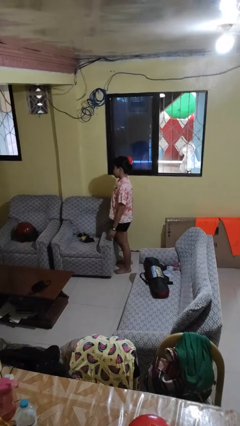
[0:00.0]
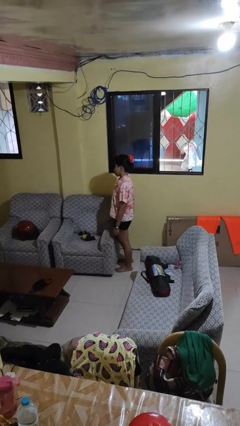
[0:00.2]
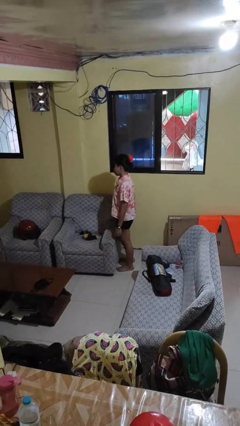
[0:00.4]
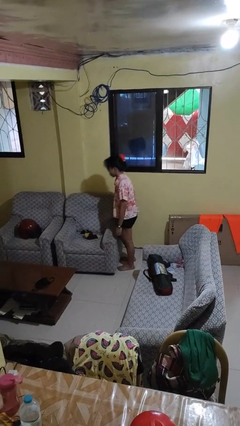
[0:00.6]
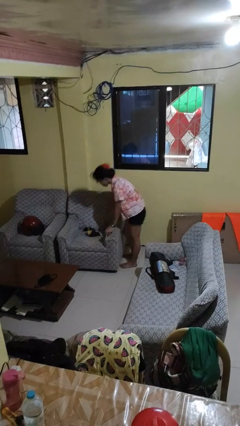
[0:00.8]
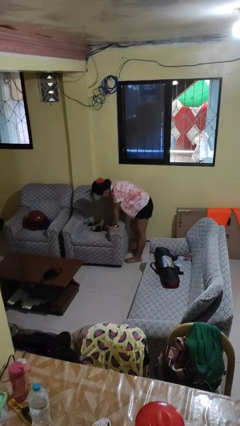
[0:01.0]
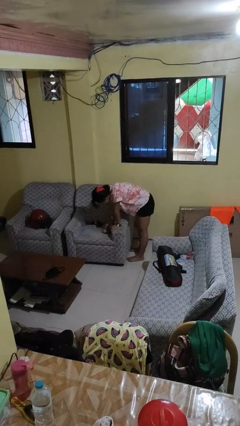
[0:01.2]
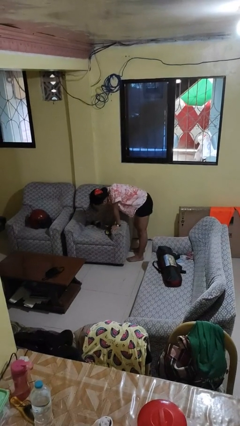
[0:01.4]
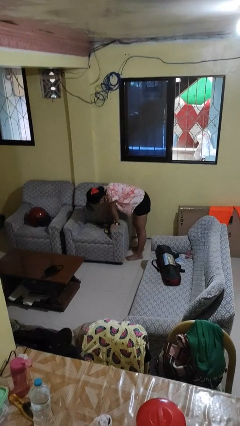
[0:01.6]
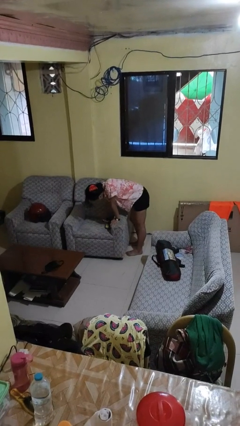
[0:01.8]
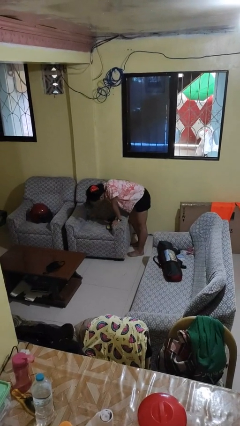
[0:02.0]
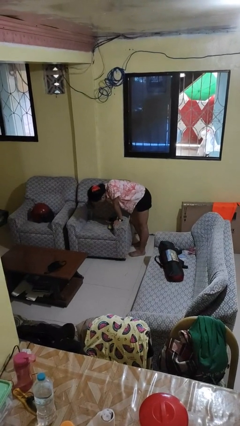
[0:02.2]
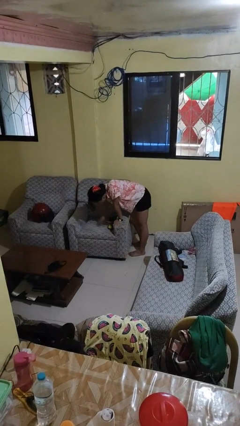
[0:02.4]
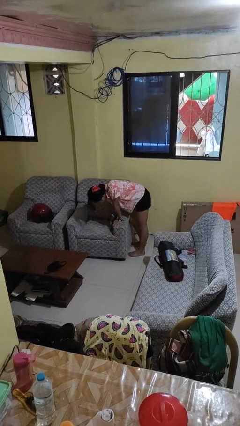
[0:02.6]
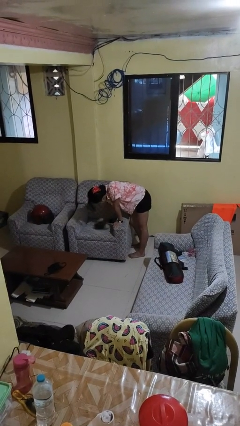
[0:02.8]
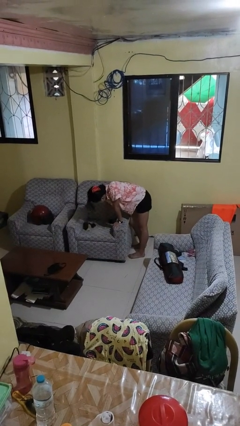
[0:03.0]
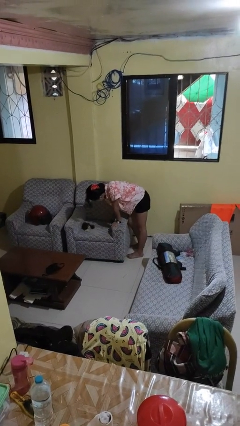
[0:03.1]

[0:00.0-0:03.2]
person searches under couch

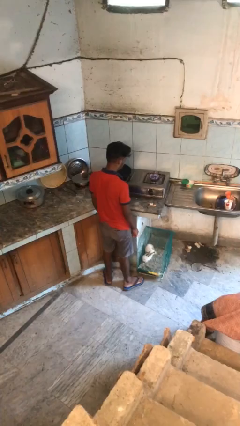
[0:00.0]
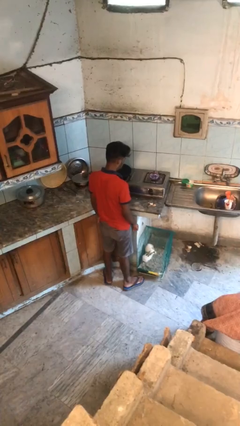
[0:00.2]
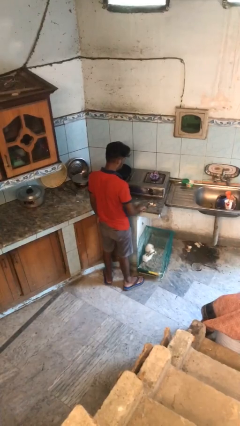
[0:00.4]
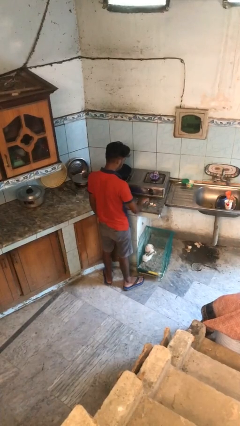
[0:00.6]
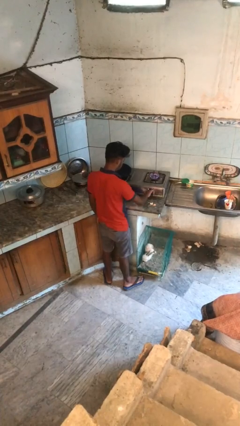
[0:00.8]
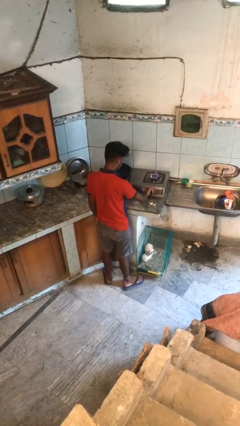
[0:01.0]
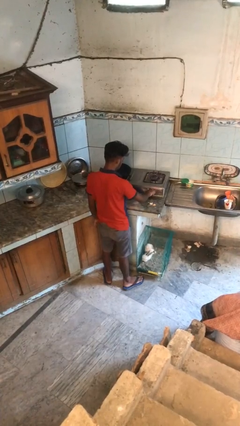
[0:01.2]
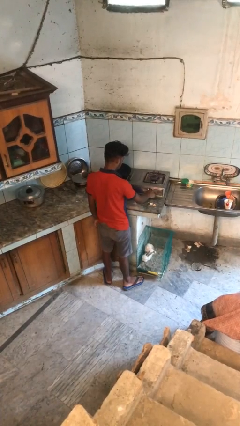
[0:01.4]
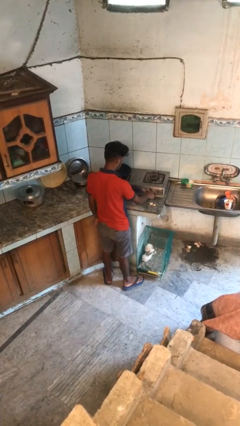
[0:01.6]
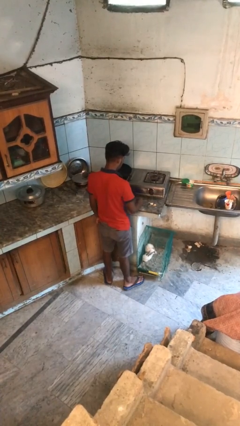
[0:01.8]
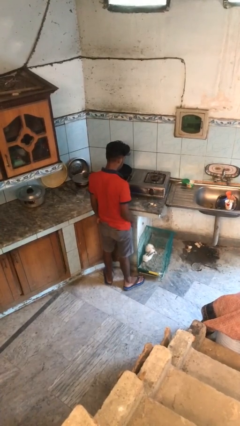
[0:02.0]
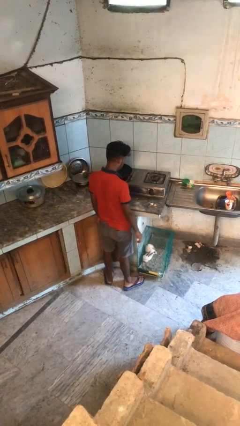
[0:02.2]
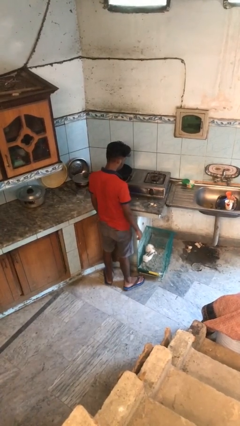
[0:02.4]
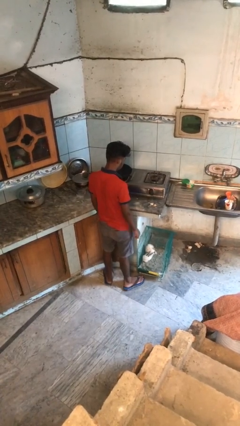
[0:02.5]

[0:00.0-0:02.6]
person turns off stovetop

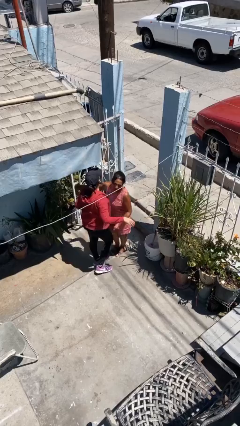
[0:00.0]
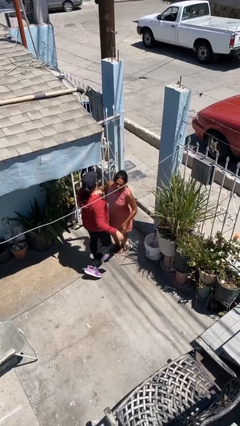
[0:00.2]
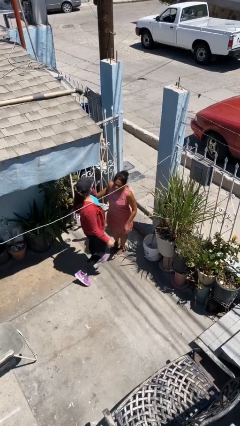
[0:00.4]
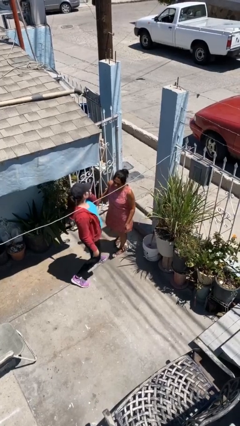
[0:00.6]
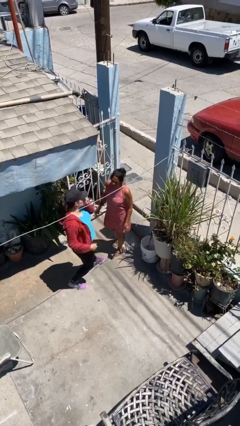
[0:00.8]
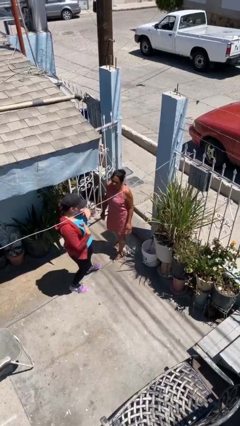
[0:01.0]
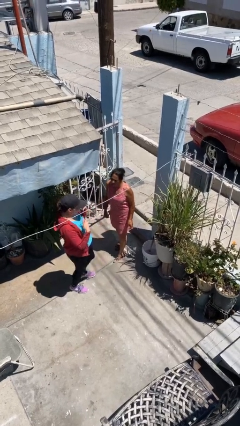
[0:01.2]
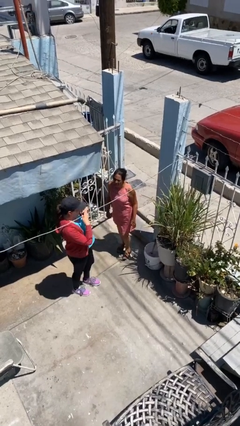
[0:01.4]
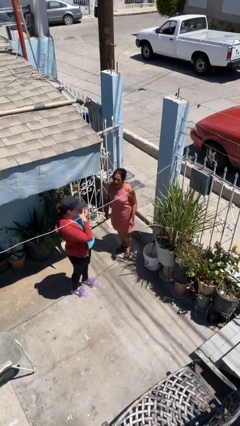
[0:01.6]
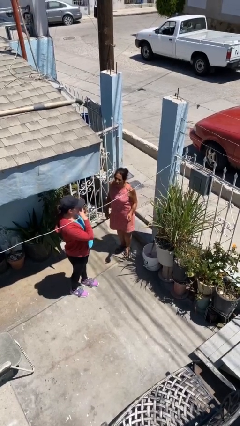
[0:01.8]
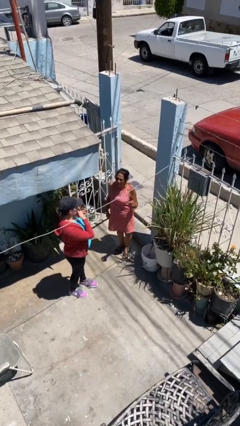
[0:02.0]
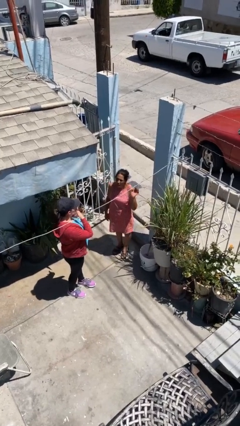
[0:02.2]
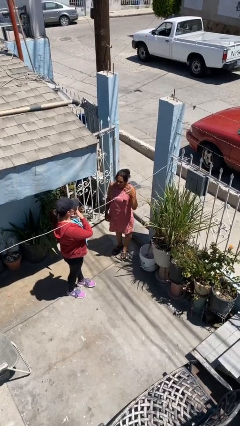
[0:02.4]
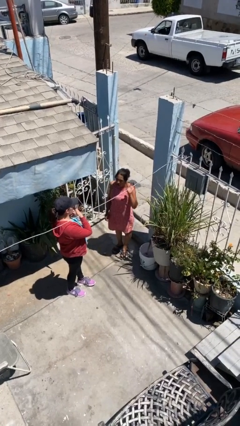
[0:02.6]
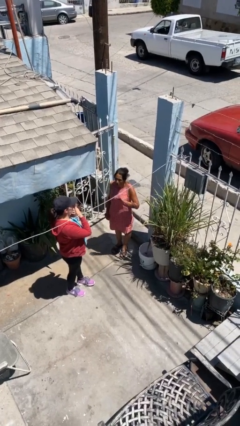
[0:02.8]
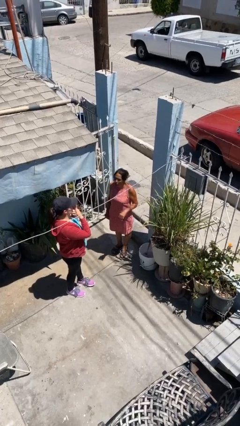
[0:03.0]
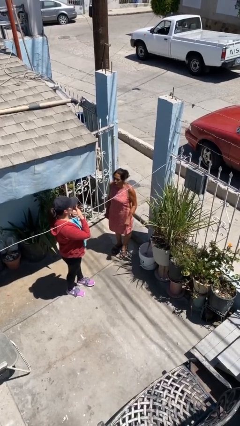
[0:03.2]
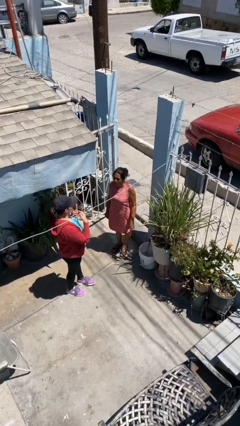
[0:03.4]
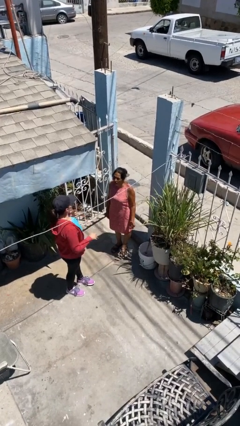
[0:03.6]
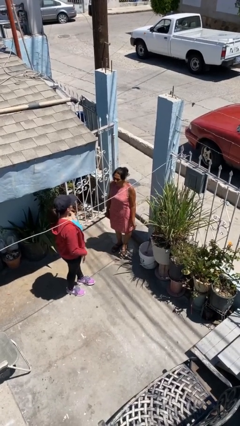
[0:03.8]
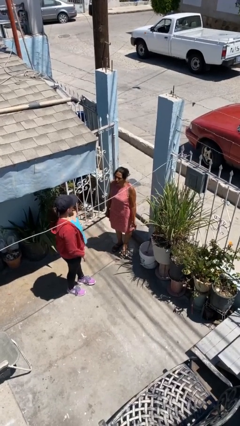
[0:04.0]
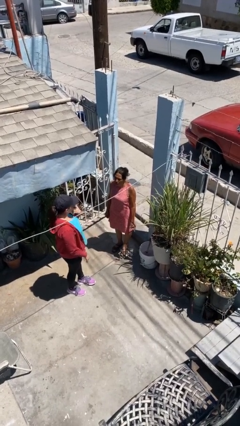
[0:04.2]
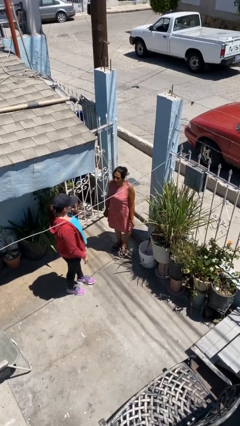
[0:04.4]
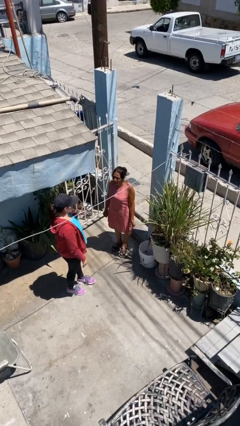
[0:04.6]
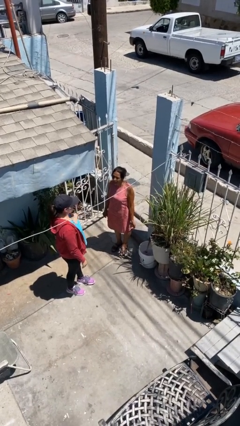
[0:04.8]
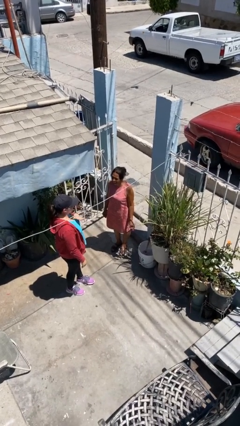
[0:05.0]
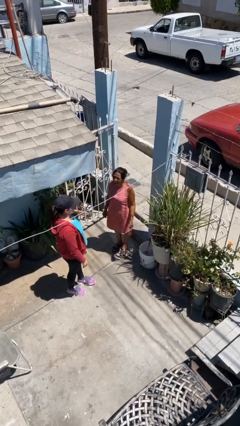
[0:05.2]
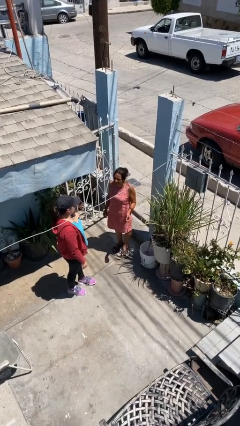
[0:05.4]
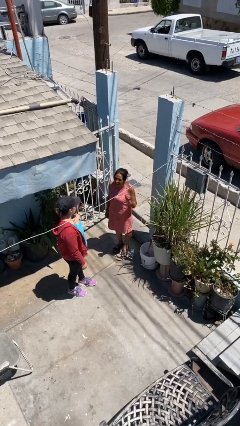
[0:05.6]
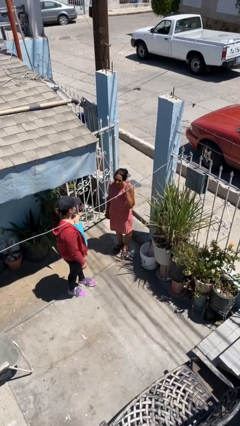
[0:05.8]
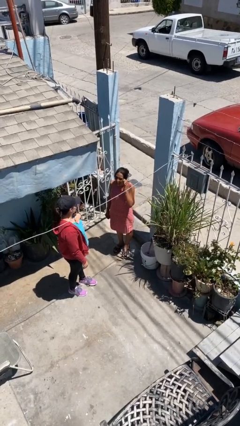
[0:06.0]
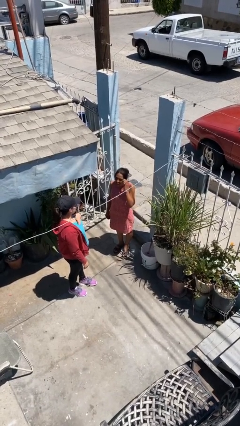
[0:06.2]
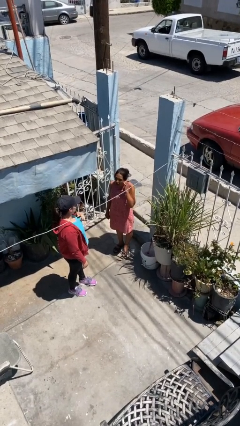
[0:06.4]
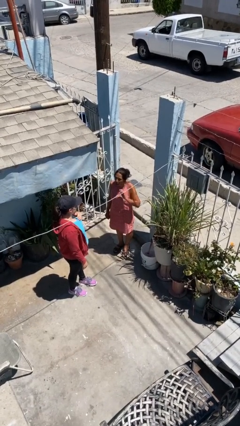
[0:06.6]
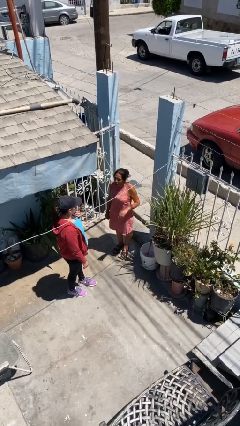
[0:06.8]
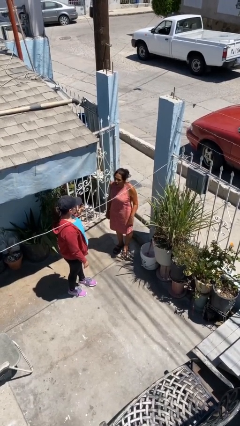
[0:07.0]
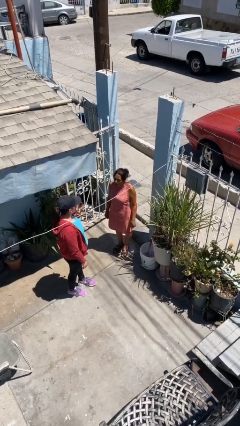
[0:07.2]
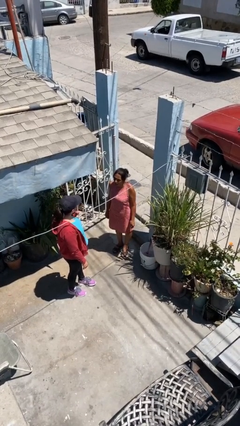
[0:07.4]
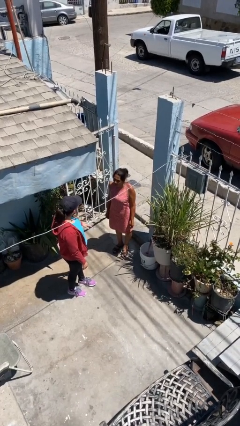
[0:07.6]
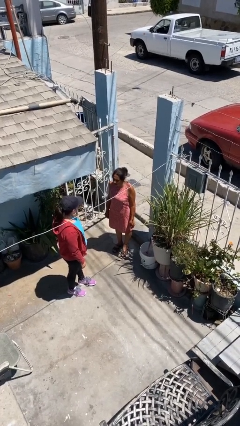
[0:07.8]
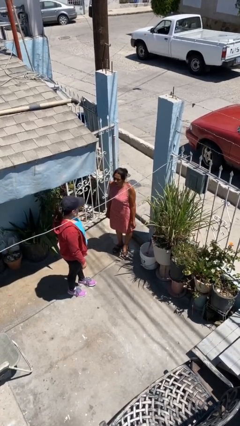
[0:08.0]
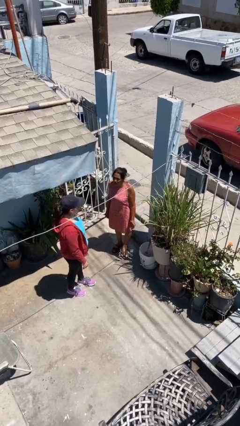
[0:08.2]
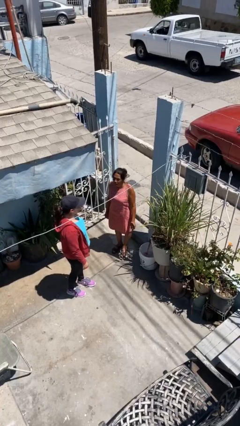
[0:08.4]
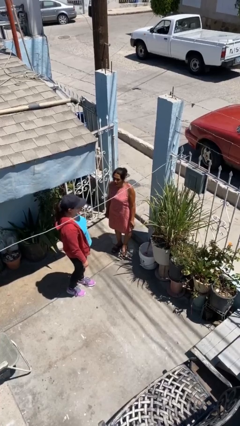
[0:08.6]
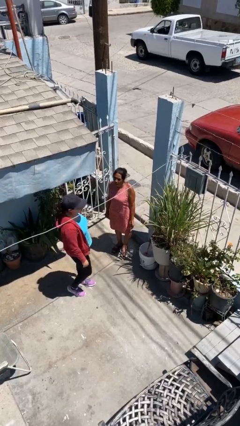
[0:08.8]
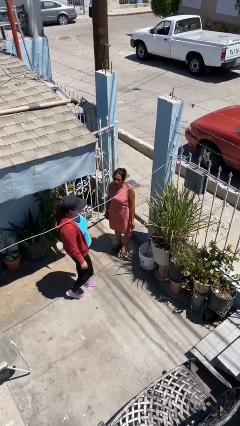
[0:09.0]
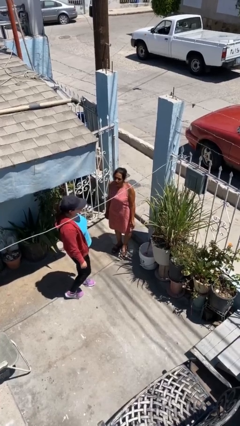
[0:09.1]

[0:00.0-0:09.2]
person talks to person

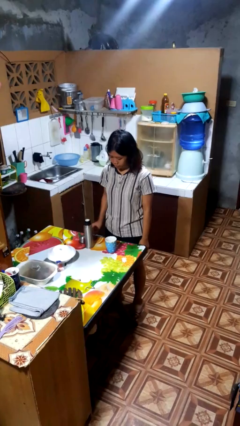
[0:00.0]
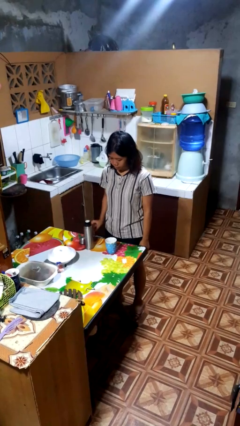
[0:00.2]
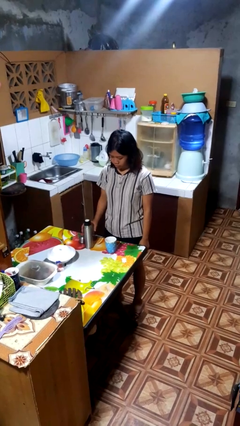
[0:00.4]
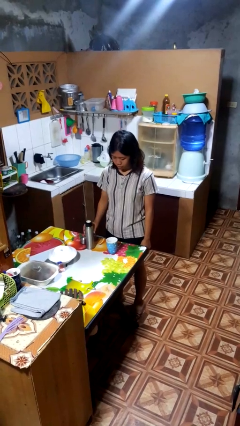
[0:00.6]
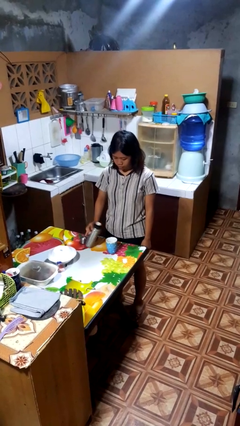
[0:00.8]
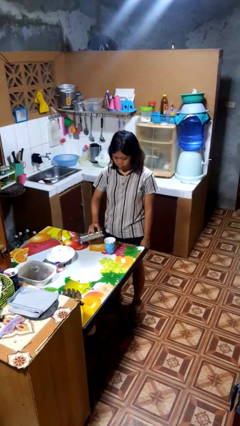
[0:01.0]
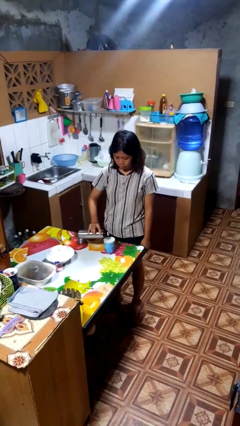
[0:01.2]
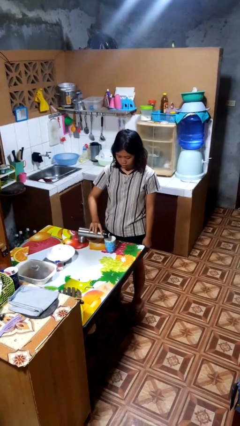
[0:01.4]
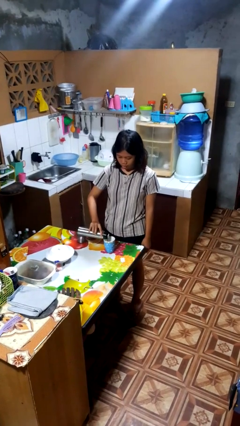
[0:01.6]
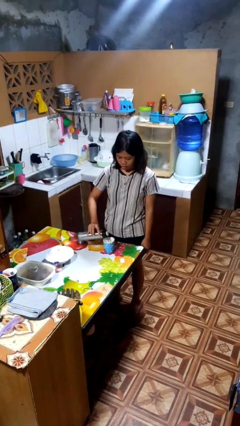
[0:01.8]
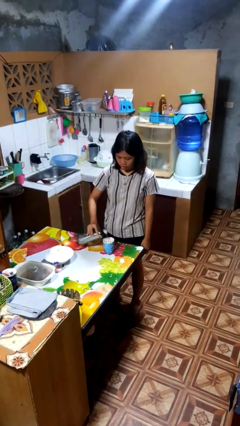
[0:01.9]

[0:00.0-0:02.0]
person pours coffee into mug

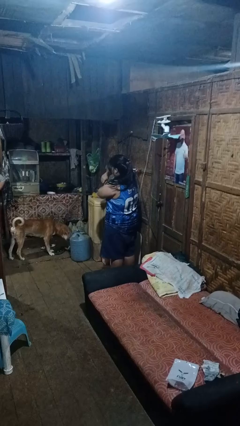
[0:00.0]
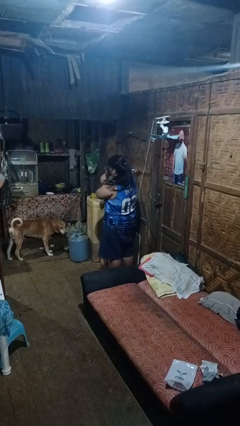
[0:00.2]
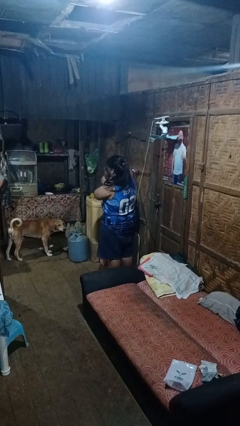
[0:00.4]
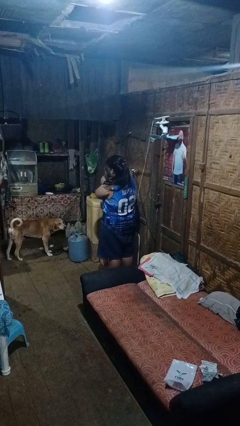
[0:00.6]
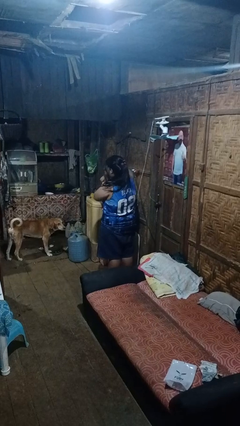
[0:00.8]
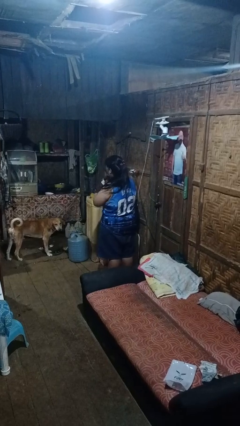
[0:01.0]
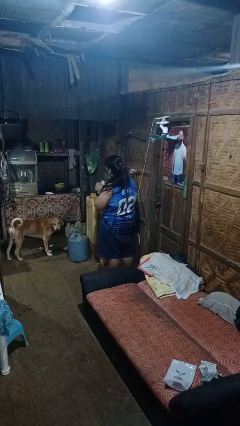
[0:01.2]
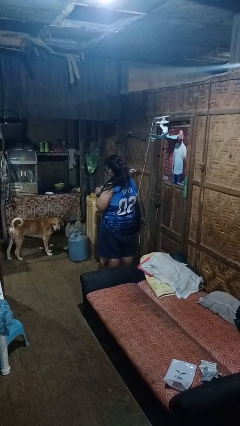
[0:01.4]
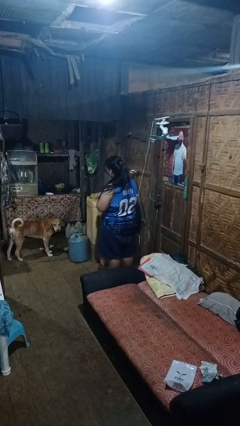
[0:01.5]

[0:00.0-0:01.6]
person applies deodorant
